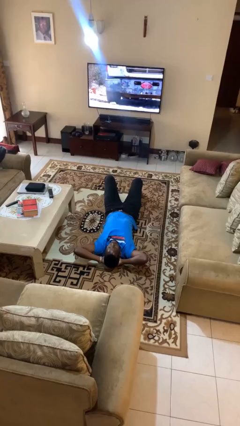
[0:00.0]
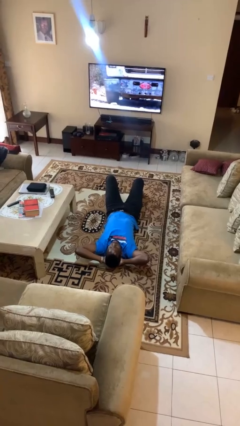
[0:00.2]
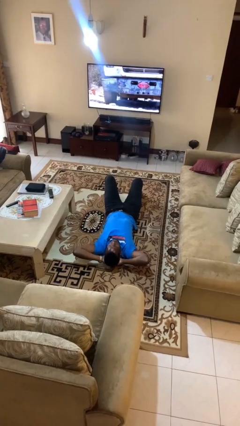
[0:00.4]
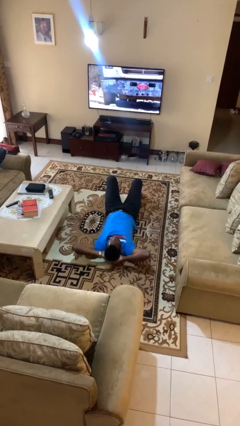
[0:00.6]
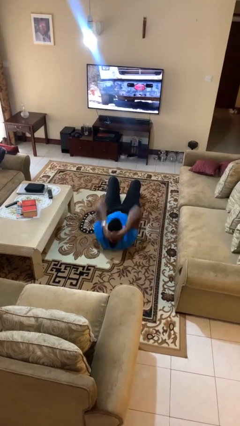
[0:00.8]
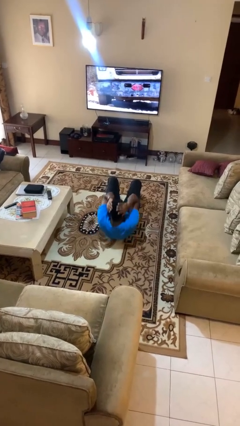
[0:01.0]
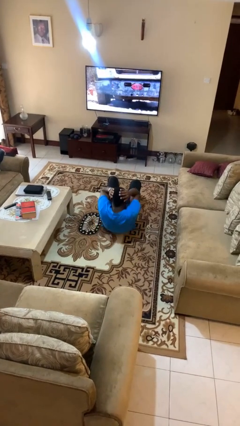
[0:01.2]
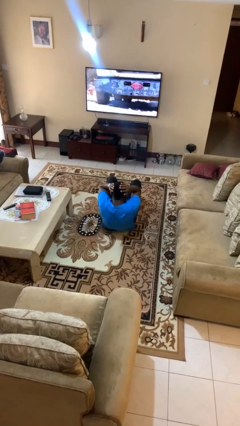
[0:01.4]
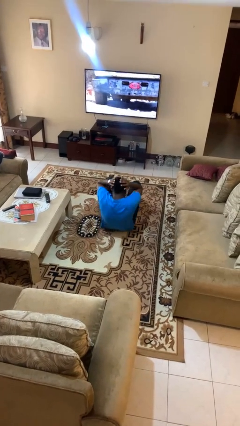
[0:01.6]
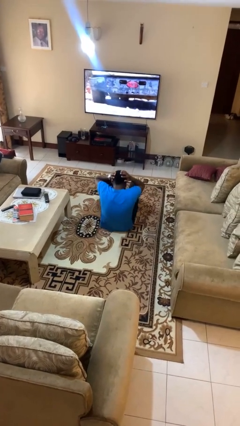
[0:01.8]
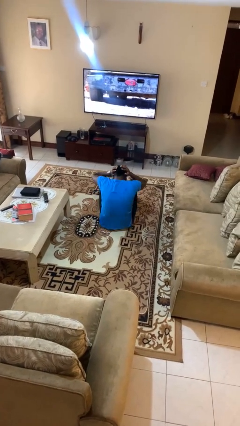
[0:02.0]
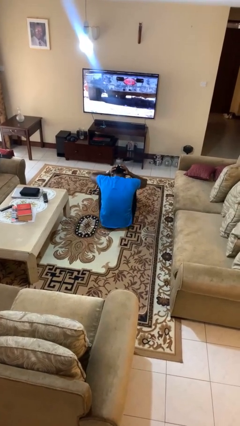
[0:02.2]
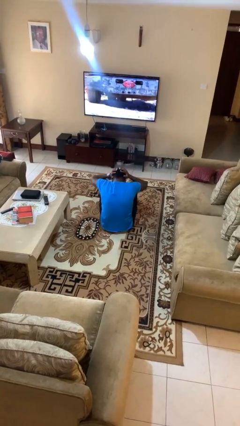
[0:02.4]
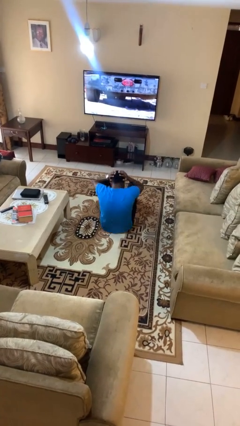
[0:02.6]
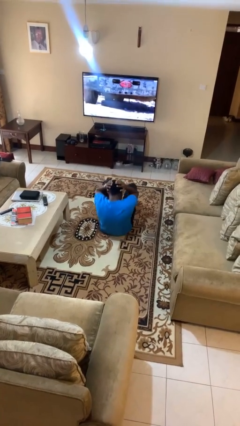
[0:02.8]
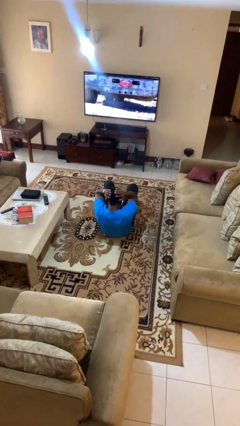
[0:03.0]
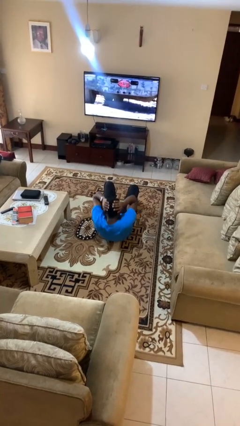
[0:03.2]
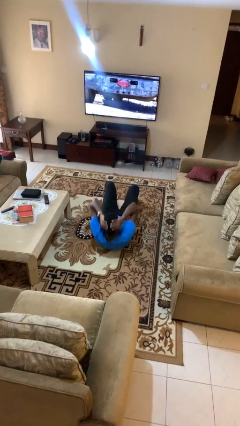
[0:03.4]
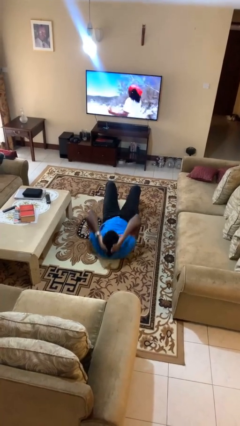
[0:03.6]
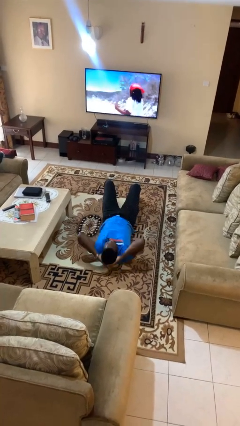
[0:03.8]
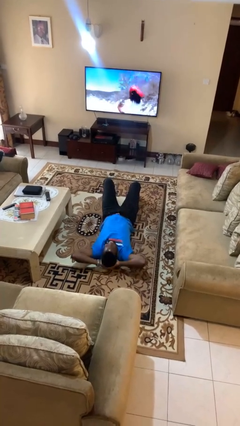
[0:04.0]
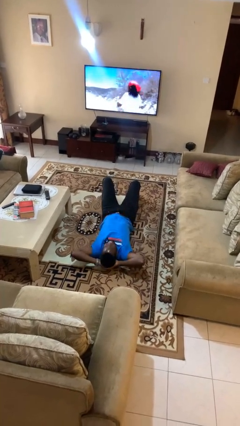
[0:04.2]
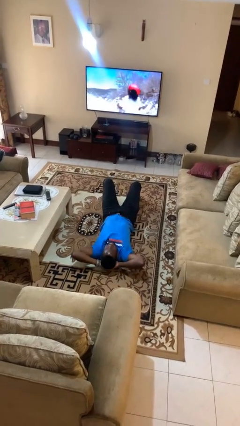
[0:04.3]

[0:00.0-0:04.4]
person exercises with situp

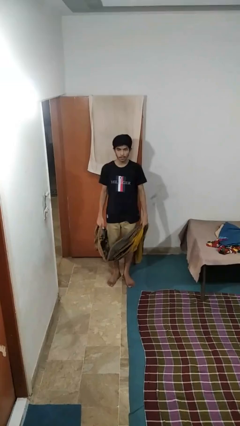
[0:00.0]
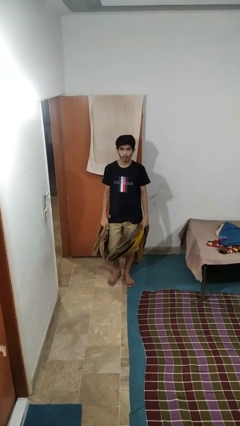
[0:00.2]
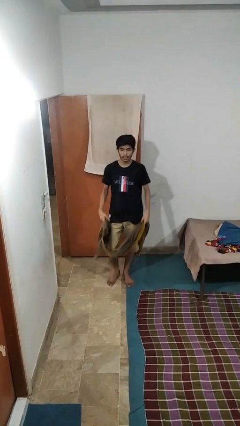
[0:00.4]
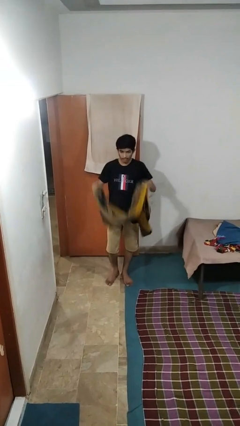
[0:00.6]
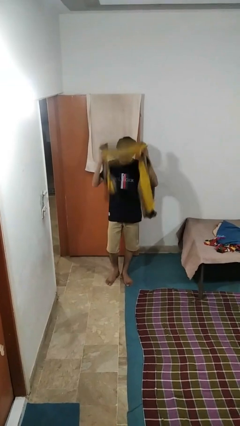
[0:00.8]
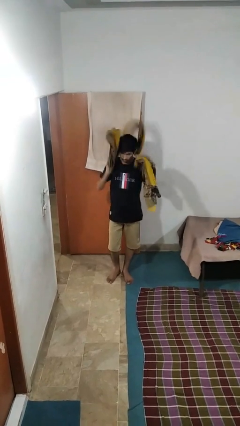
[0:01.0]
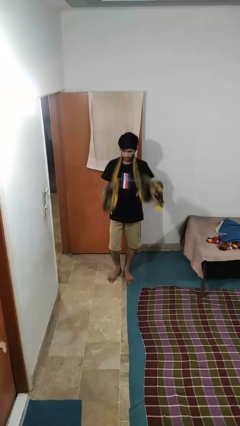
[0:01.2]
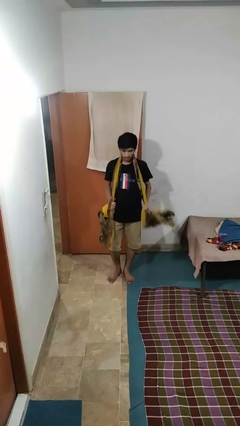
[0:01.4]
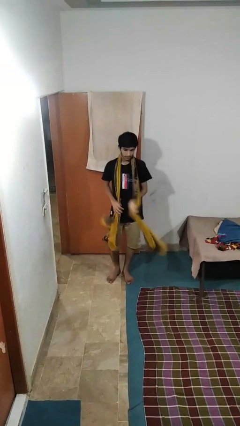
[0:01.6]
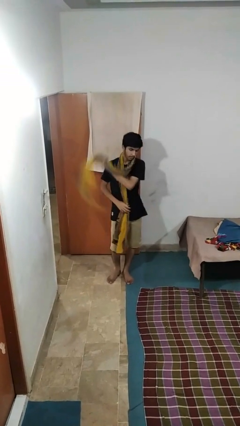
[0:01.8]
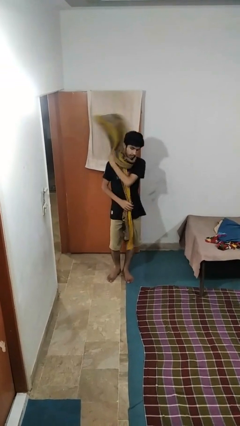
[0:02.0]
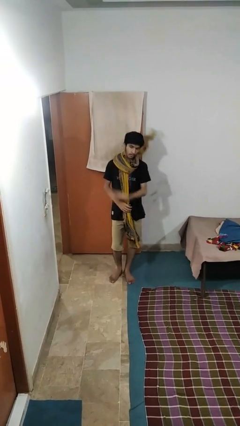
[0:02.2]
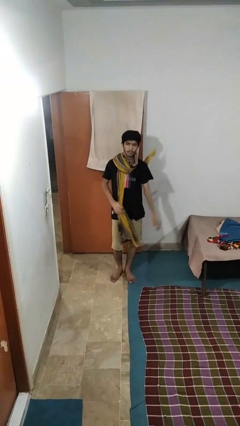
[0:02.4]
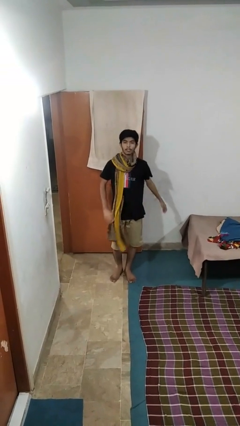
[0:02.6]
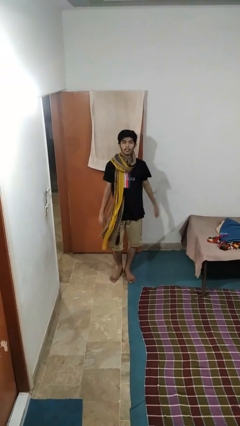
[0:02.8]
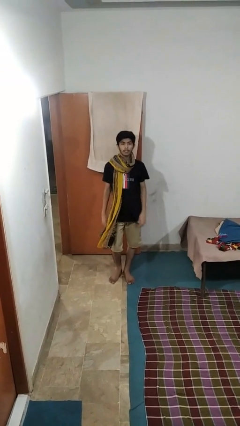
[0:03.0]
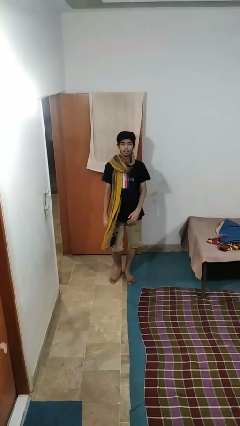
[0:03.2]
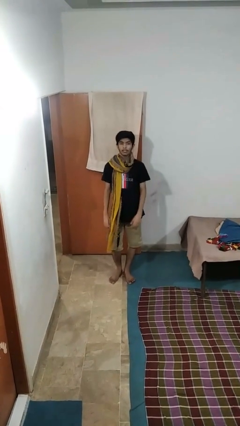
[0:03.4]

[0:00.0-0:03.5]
person puts on scarf

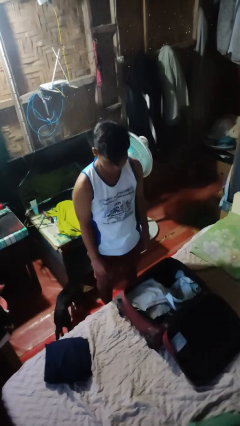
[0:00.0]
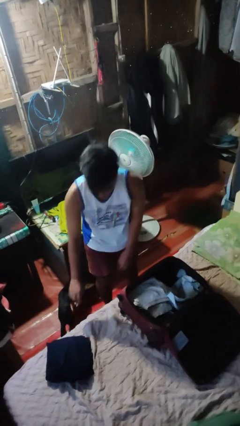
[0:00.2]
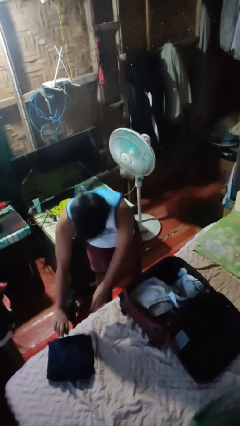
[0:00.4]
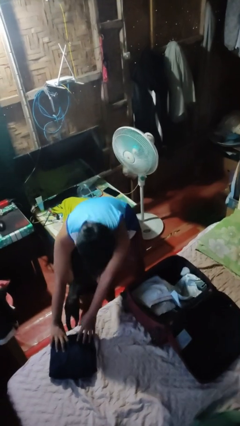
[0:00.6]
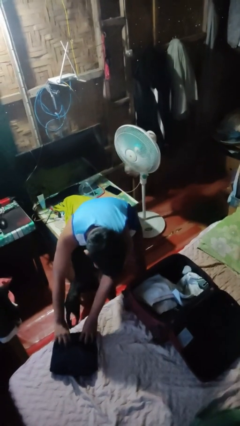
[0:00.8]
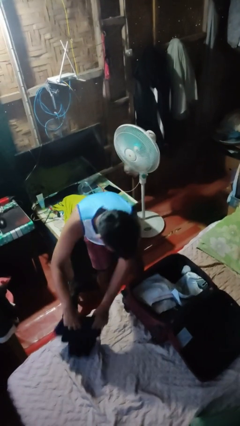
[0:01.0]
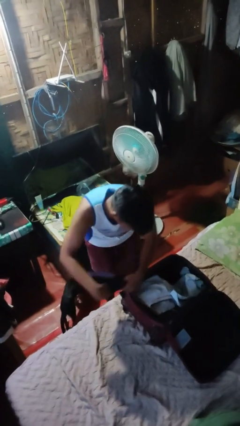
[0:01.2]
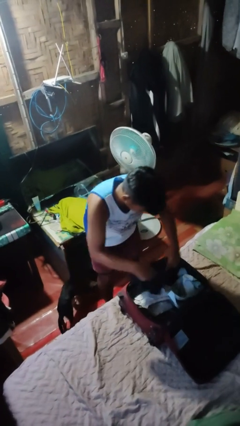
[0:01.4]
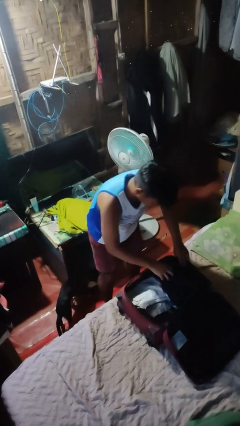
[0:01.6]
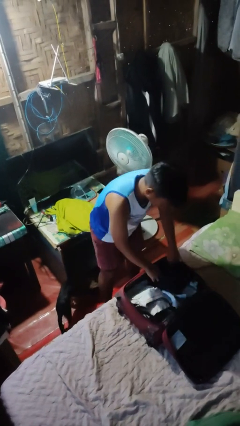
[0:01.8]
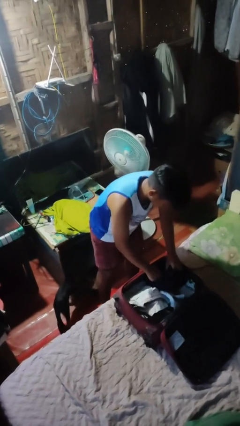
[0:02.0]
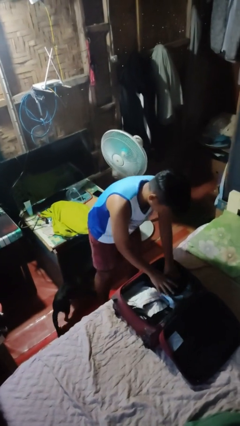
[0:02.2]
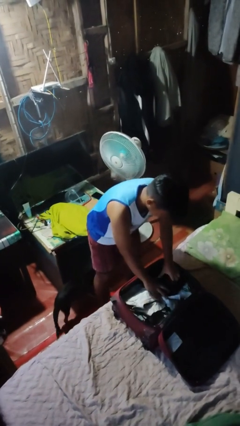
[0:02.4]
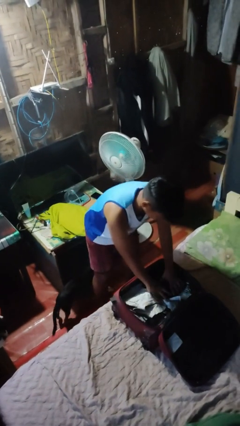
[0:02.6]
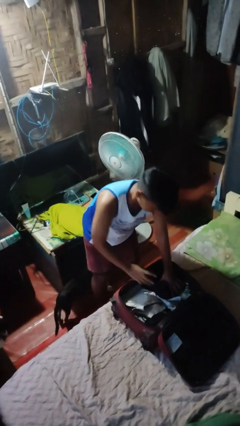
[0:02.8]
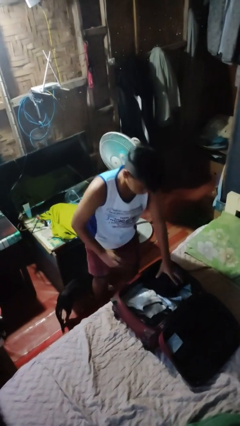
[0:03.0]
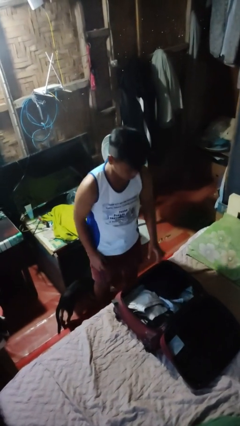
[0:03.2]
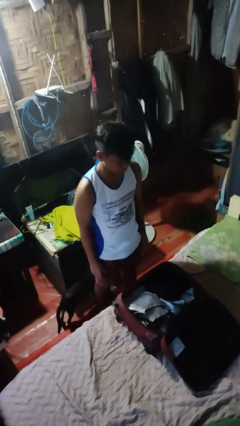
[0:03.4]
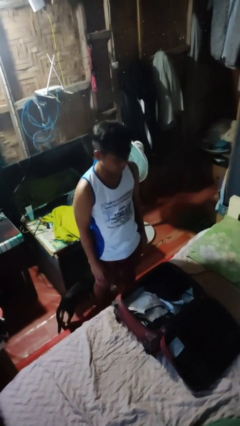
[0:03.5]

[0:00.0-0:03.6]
person loads clothes into suitcase

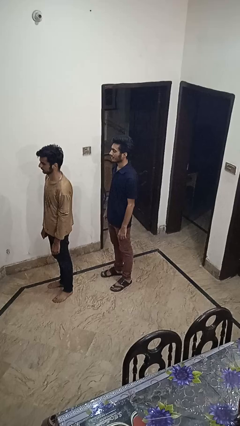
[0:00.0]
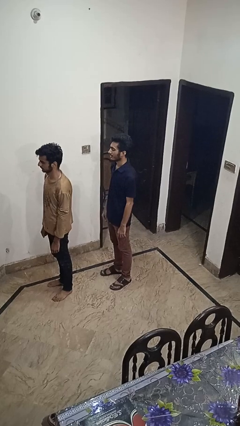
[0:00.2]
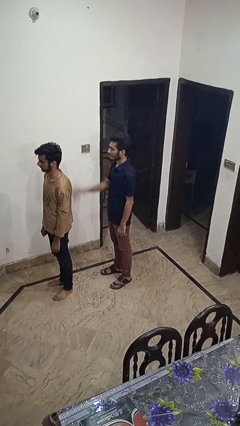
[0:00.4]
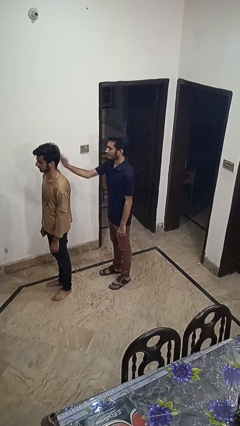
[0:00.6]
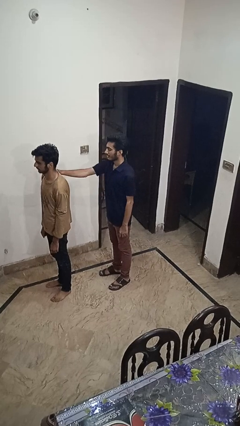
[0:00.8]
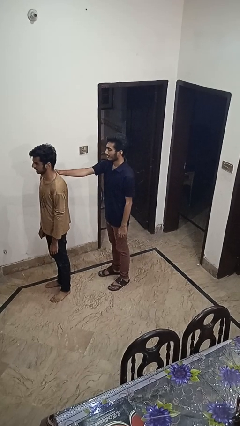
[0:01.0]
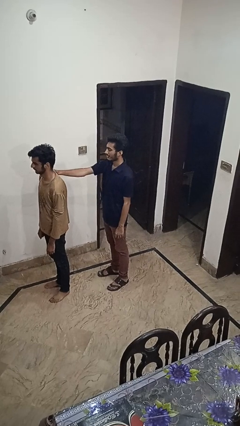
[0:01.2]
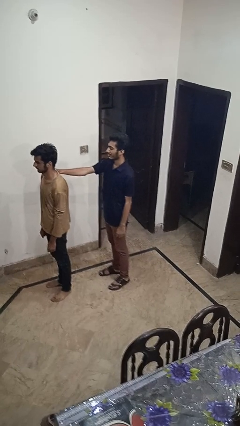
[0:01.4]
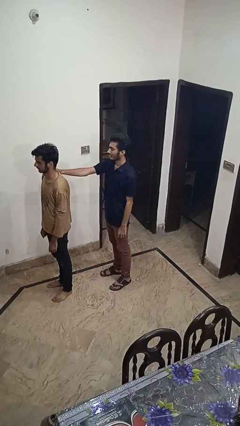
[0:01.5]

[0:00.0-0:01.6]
person grabs person by shoulder

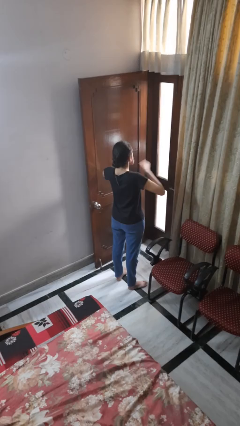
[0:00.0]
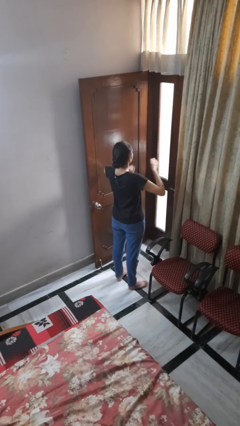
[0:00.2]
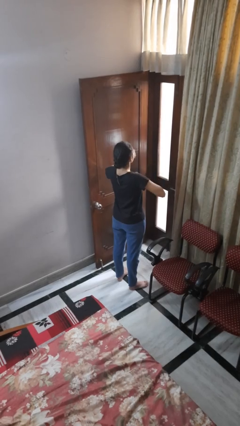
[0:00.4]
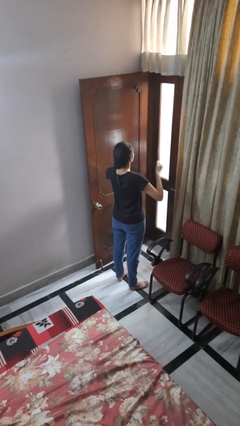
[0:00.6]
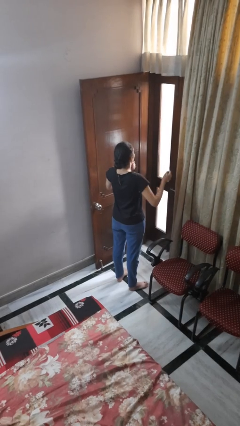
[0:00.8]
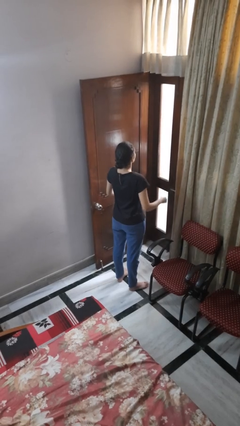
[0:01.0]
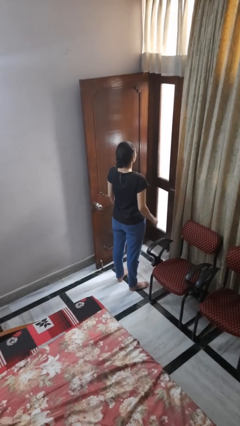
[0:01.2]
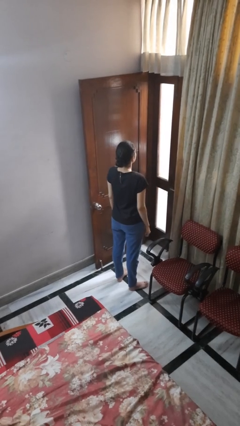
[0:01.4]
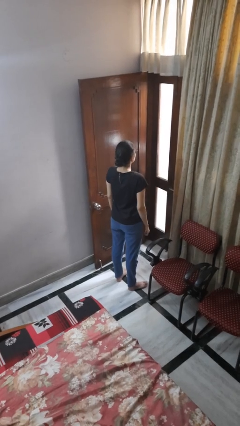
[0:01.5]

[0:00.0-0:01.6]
person drums on chest

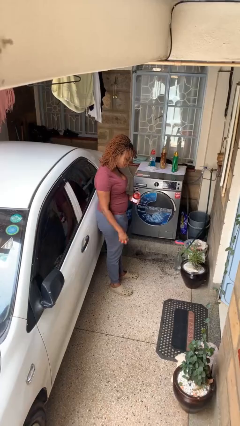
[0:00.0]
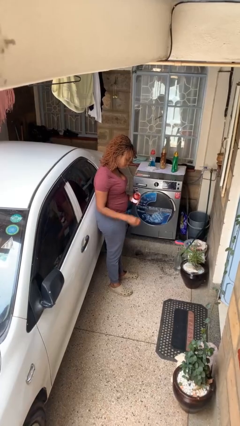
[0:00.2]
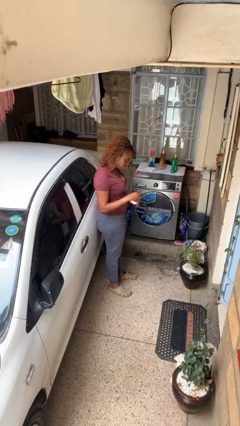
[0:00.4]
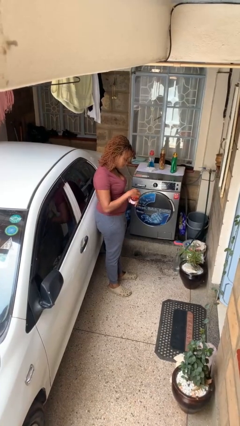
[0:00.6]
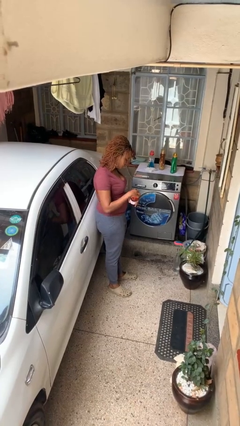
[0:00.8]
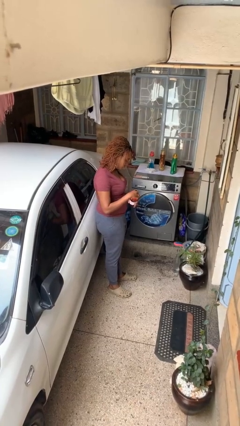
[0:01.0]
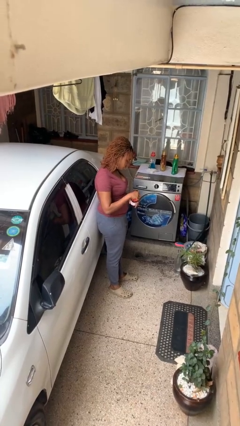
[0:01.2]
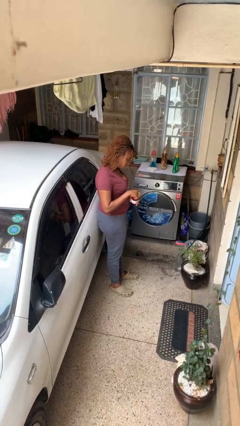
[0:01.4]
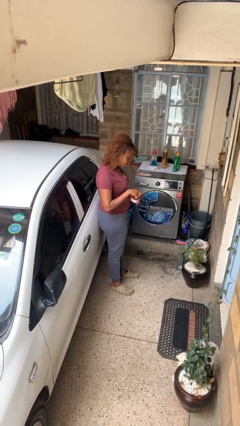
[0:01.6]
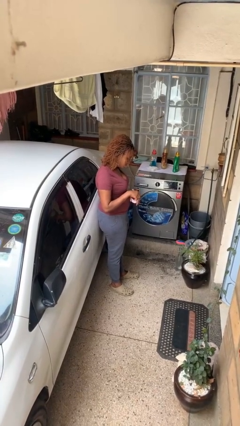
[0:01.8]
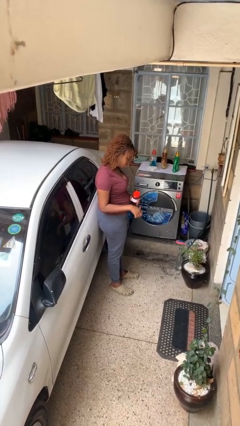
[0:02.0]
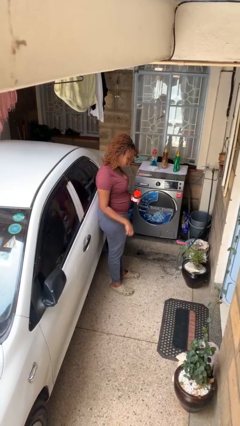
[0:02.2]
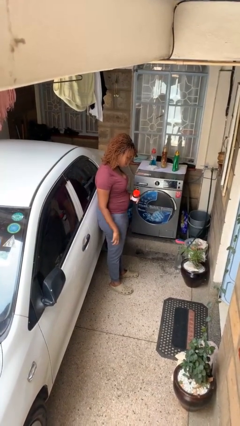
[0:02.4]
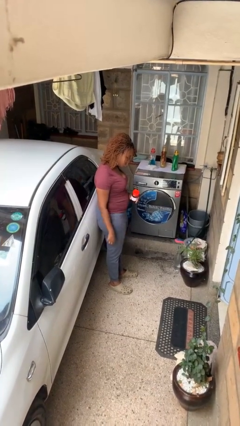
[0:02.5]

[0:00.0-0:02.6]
person closes jar
